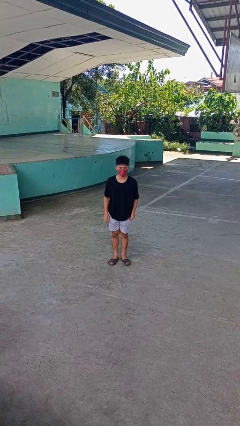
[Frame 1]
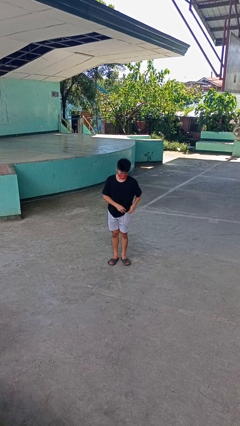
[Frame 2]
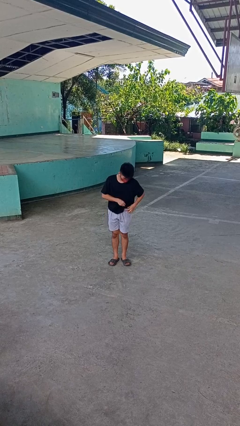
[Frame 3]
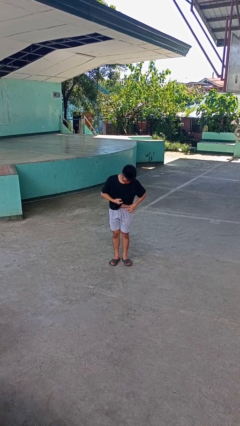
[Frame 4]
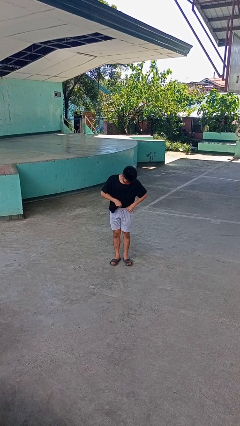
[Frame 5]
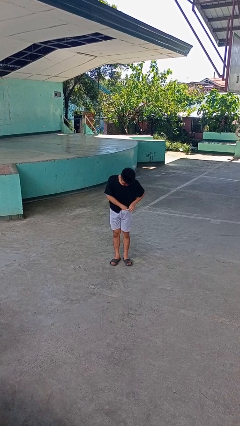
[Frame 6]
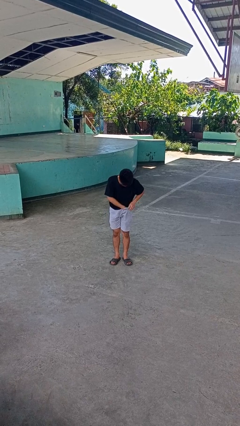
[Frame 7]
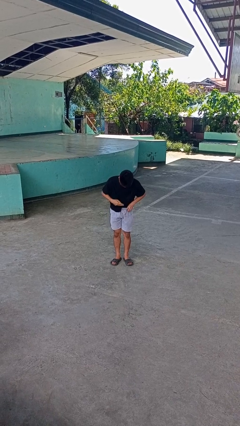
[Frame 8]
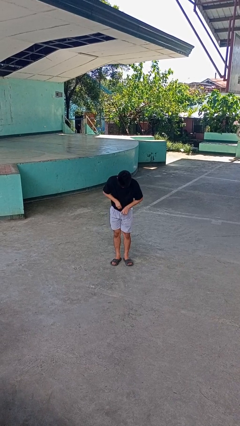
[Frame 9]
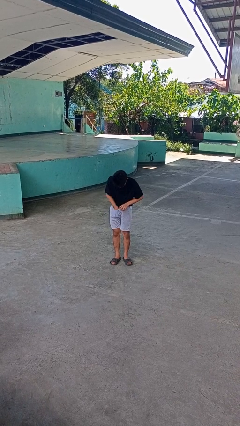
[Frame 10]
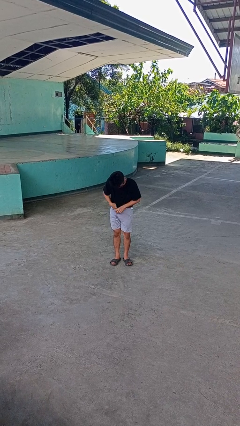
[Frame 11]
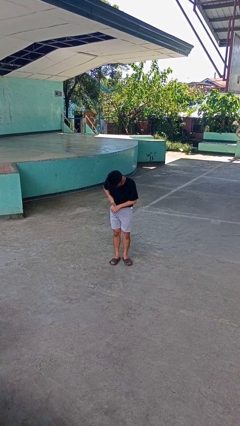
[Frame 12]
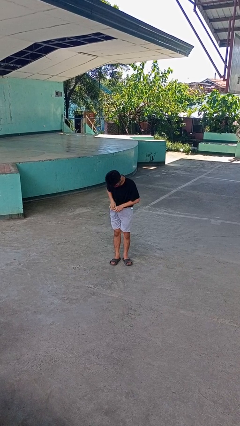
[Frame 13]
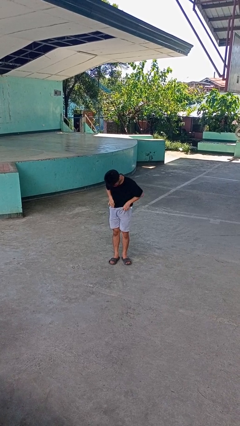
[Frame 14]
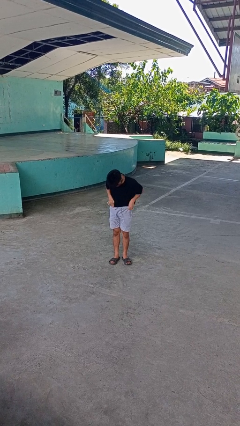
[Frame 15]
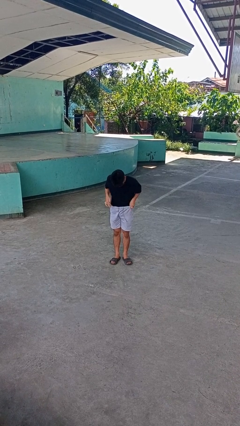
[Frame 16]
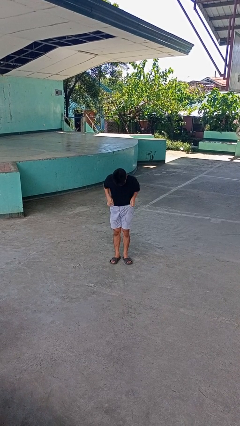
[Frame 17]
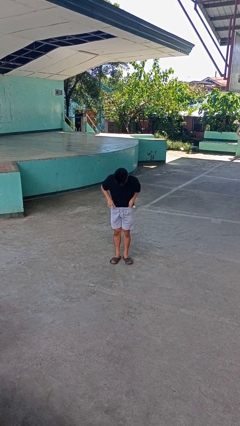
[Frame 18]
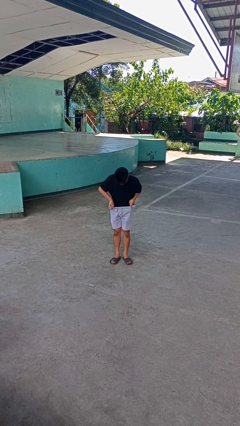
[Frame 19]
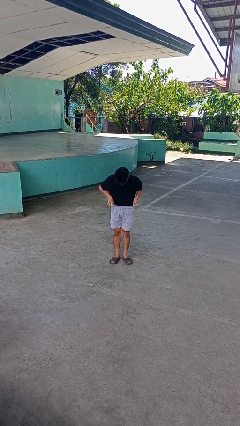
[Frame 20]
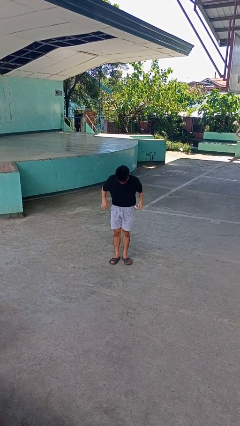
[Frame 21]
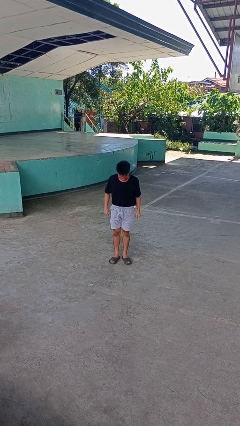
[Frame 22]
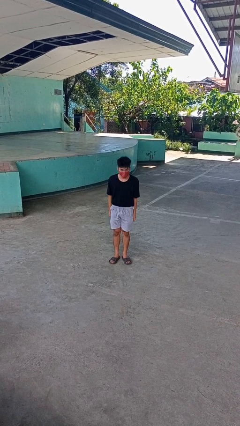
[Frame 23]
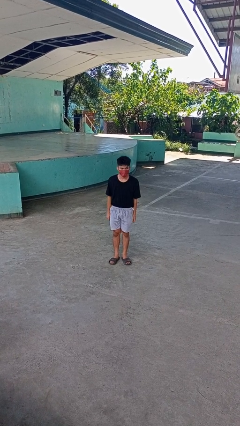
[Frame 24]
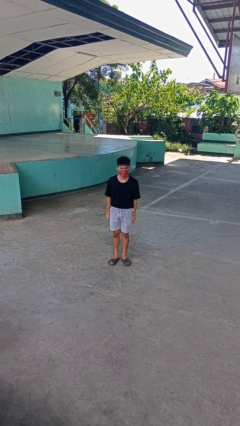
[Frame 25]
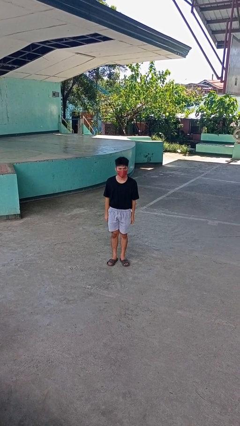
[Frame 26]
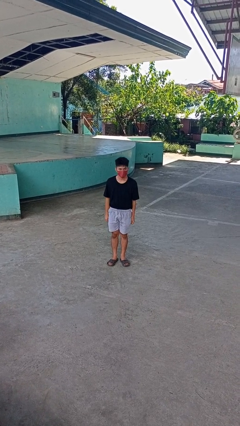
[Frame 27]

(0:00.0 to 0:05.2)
person tucks in shirt

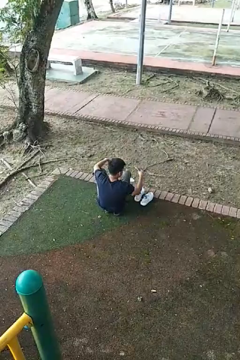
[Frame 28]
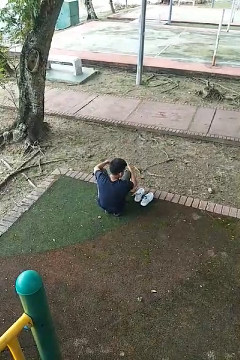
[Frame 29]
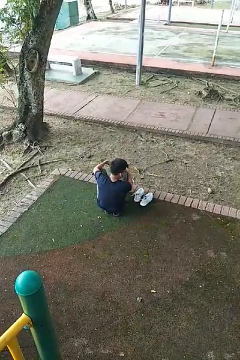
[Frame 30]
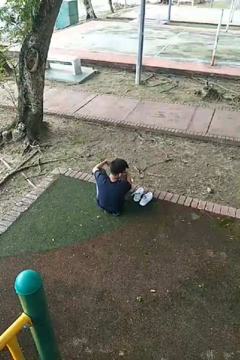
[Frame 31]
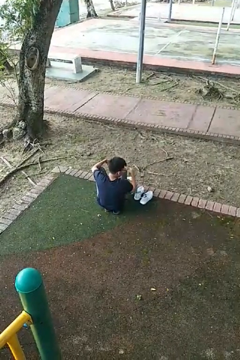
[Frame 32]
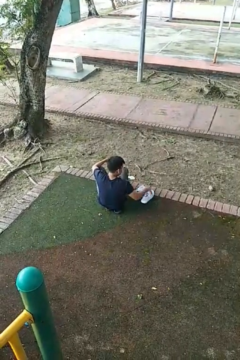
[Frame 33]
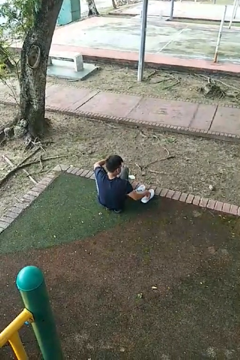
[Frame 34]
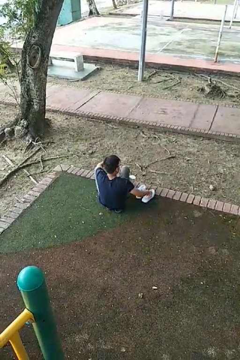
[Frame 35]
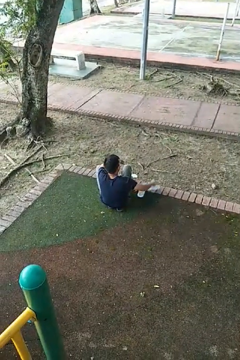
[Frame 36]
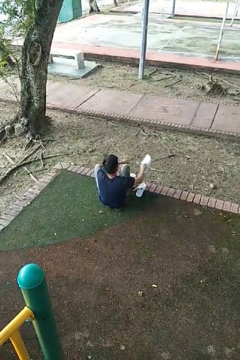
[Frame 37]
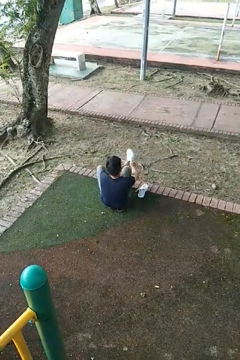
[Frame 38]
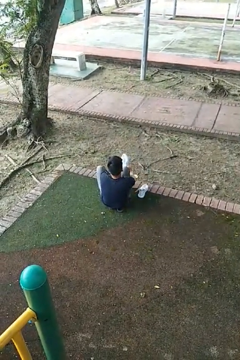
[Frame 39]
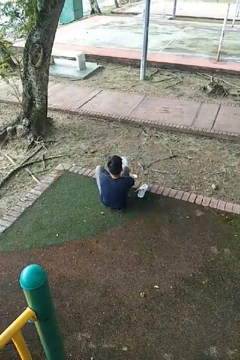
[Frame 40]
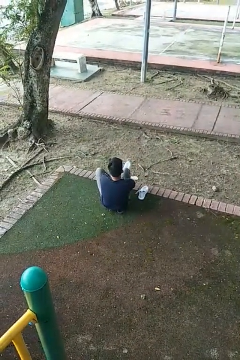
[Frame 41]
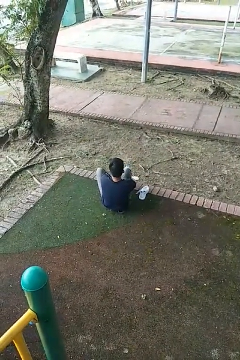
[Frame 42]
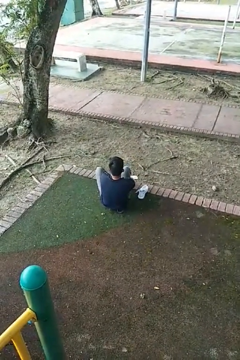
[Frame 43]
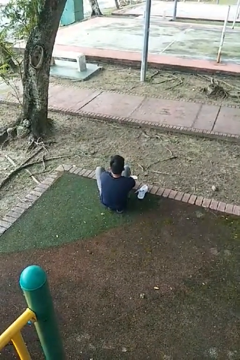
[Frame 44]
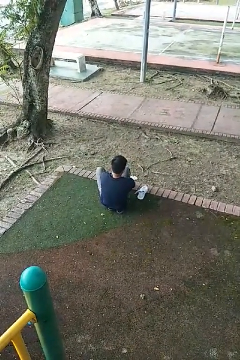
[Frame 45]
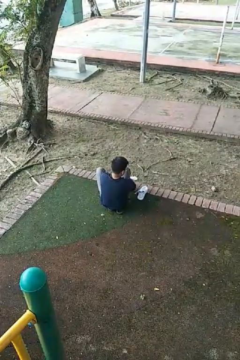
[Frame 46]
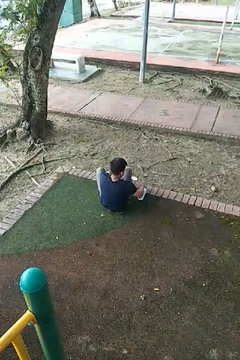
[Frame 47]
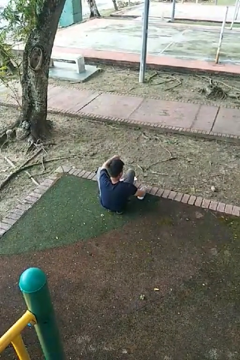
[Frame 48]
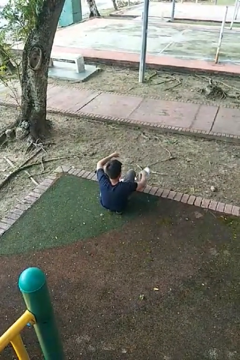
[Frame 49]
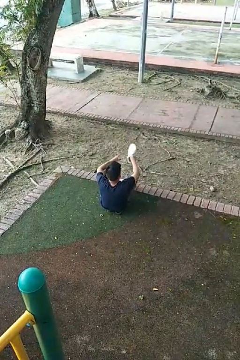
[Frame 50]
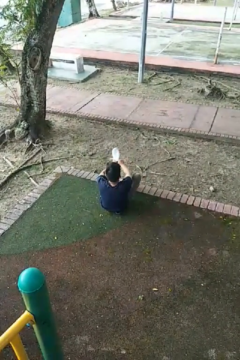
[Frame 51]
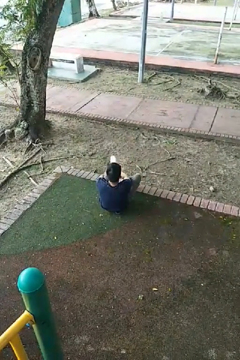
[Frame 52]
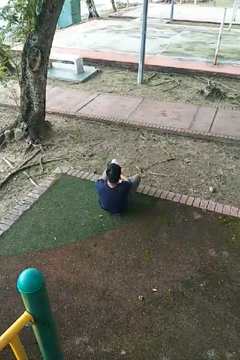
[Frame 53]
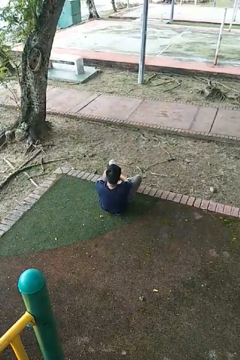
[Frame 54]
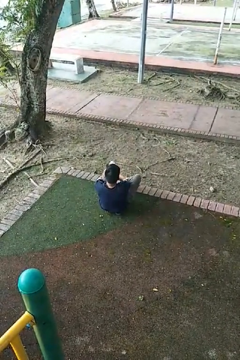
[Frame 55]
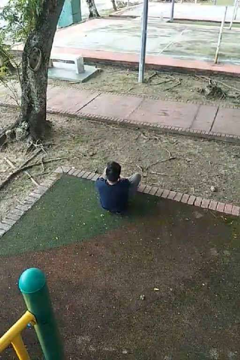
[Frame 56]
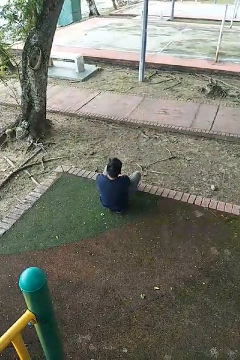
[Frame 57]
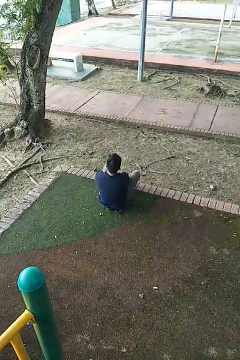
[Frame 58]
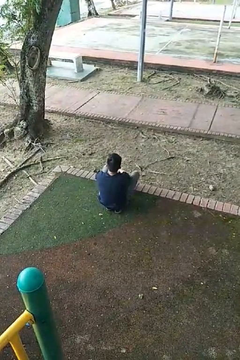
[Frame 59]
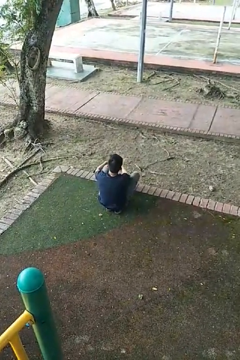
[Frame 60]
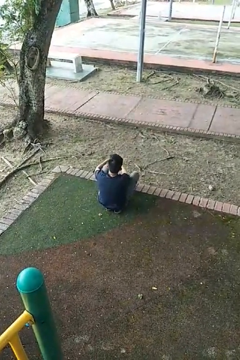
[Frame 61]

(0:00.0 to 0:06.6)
person puts on shoes

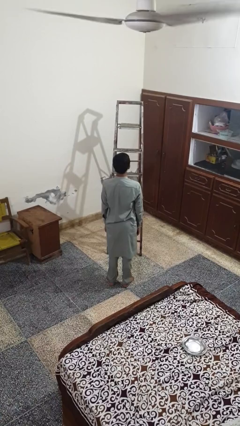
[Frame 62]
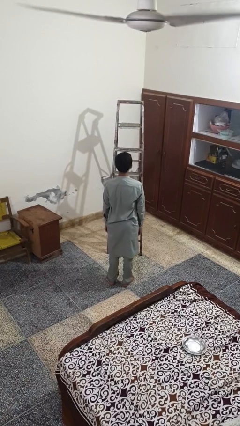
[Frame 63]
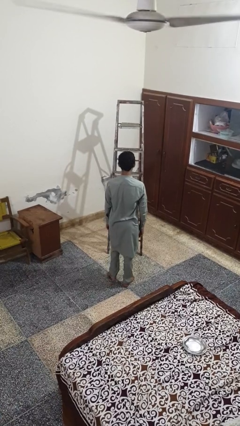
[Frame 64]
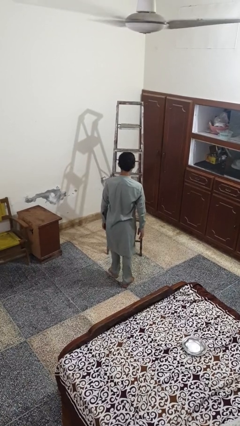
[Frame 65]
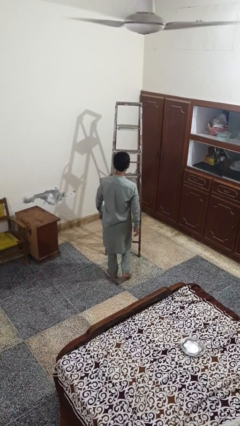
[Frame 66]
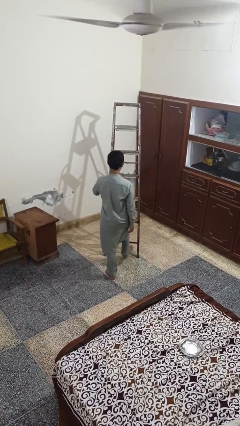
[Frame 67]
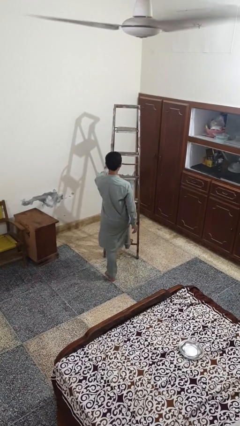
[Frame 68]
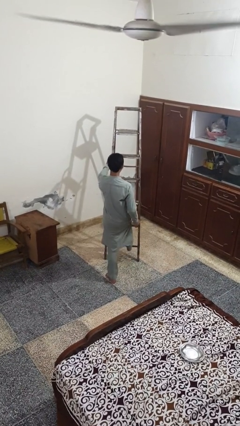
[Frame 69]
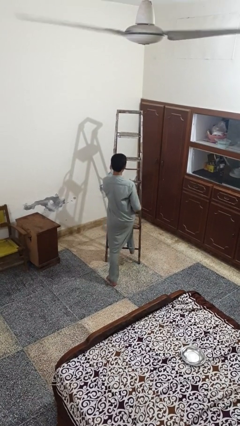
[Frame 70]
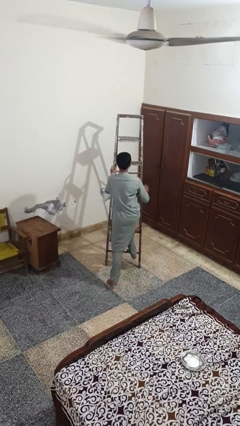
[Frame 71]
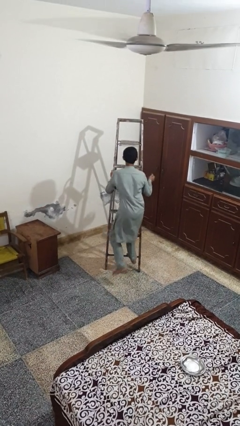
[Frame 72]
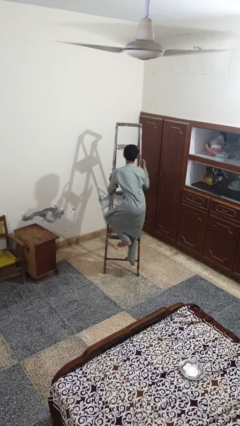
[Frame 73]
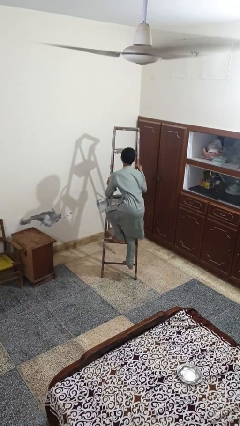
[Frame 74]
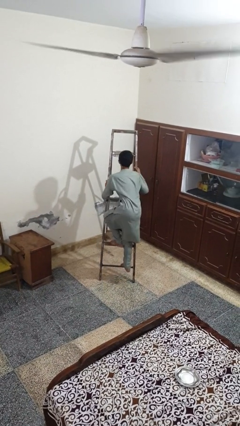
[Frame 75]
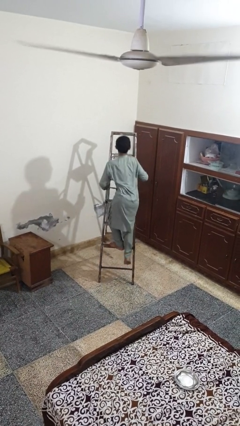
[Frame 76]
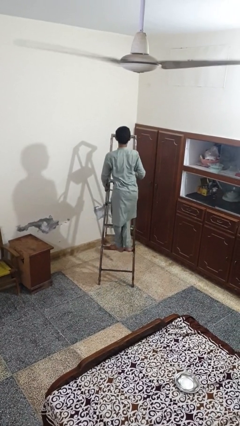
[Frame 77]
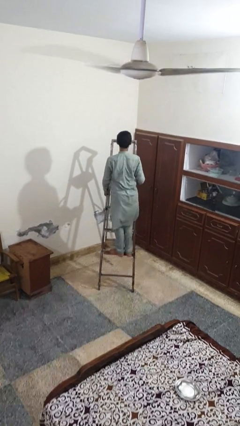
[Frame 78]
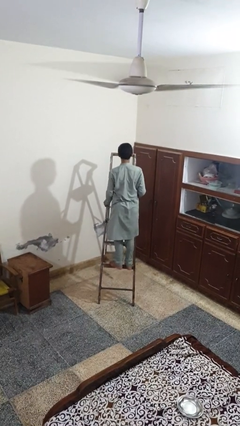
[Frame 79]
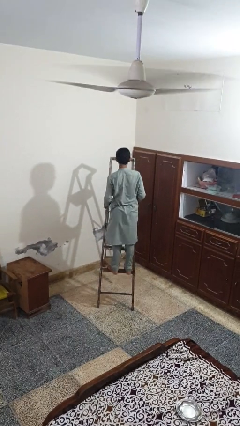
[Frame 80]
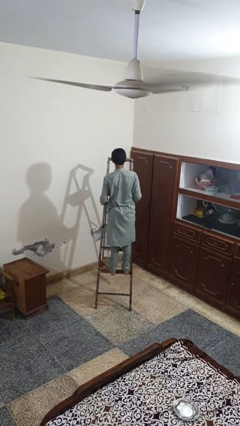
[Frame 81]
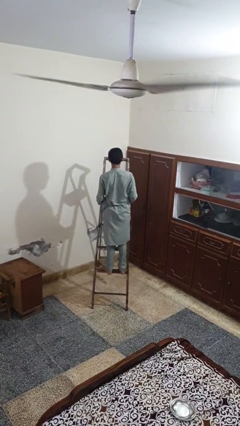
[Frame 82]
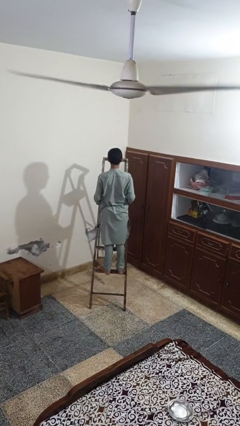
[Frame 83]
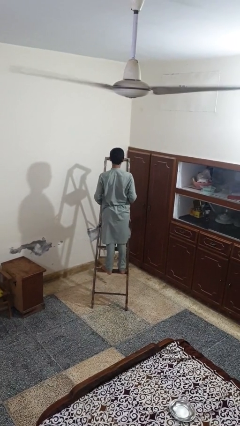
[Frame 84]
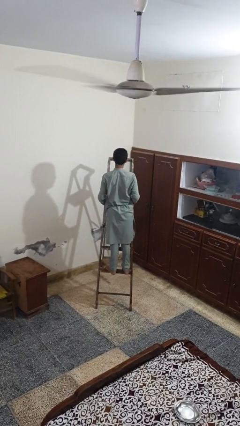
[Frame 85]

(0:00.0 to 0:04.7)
person climbs up ladder

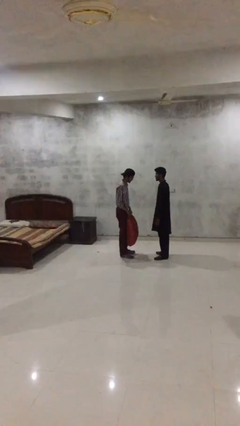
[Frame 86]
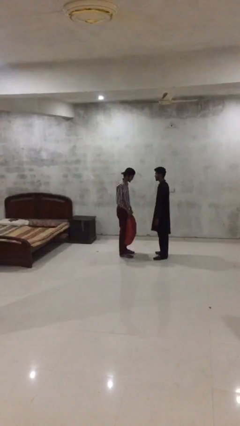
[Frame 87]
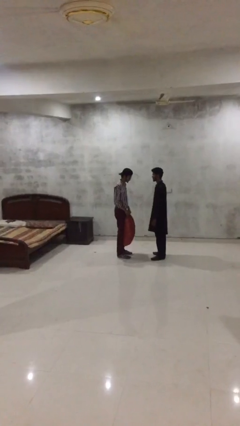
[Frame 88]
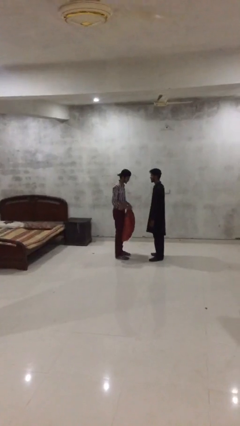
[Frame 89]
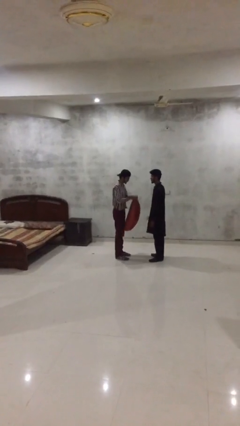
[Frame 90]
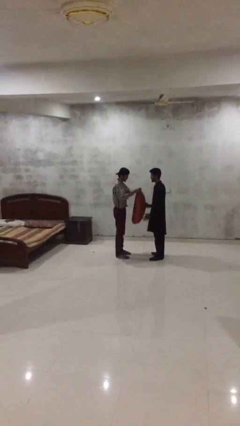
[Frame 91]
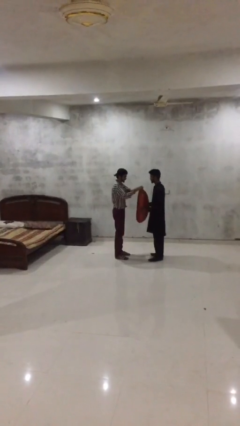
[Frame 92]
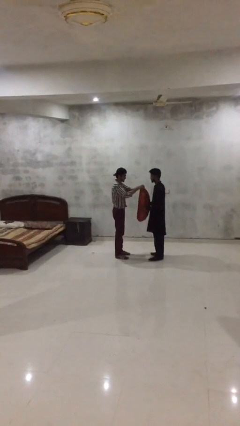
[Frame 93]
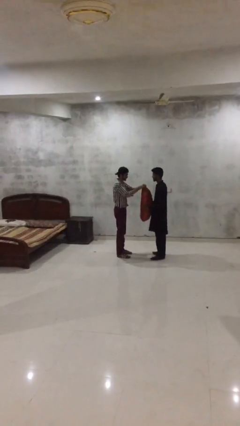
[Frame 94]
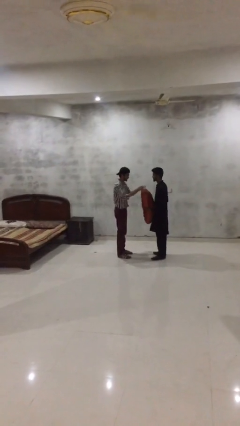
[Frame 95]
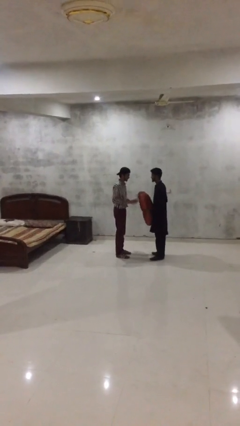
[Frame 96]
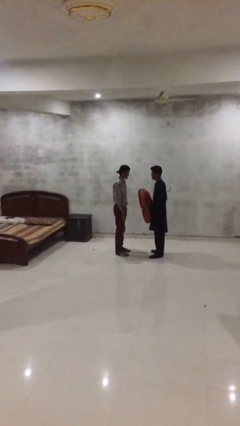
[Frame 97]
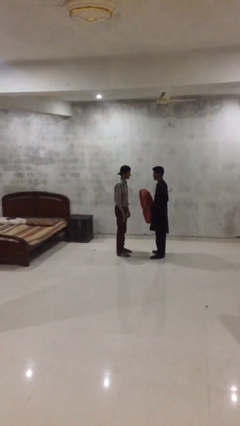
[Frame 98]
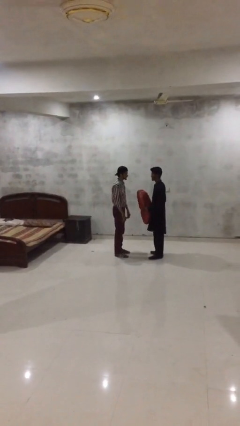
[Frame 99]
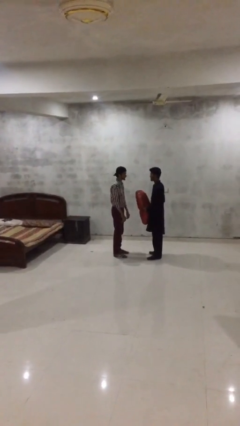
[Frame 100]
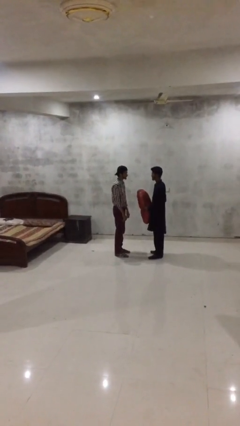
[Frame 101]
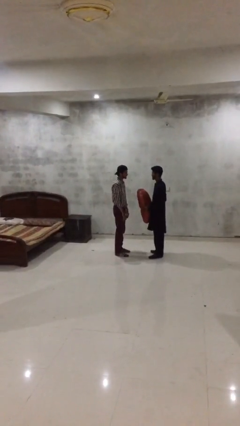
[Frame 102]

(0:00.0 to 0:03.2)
person transfers object to person
